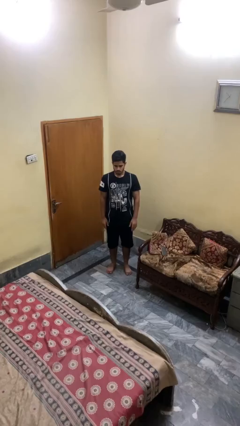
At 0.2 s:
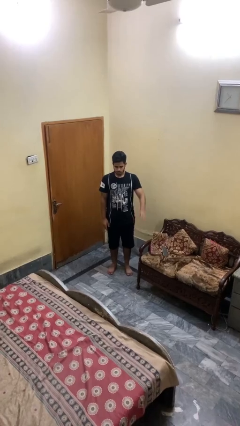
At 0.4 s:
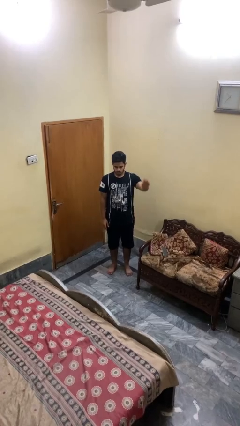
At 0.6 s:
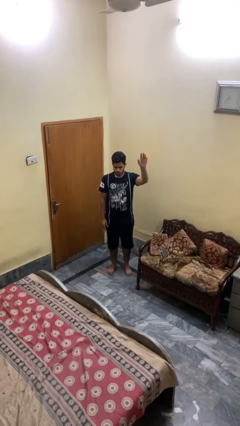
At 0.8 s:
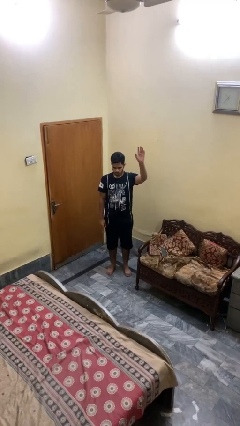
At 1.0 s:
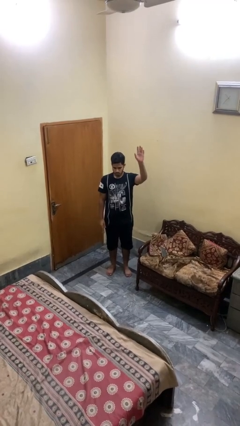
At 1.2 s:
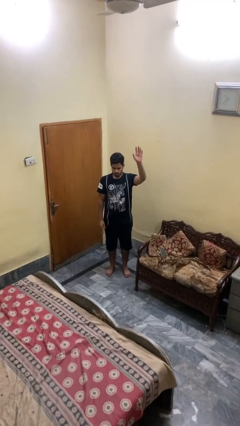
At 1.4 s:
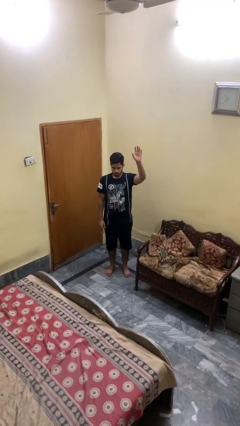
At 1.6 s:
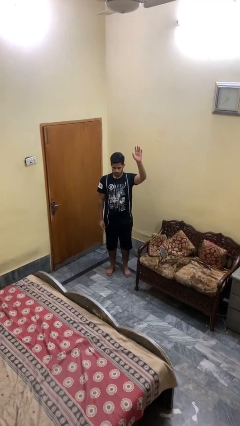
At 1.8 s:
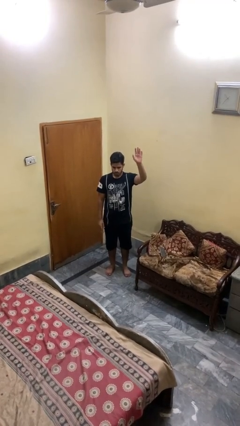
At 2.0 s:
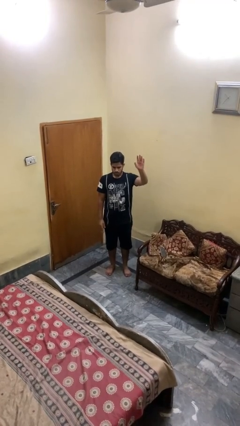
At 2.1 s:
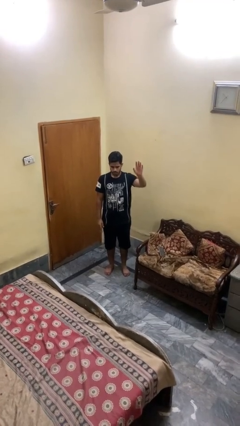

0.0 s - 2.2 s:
person gestures raise hand

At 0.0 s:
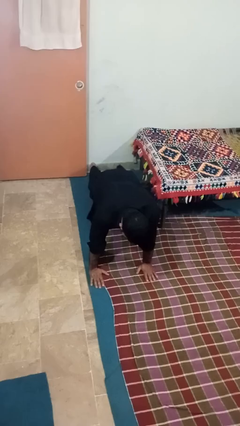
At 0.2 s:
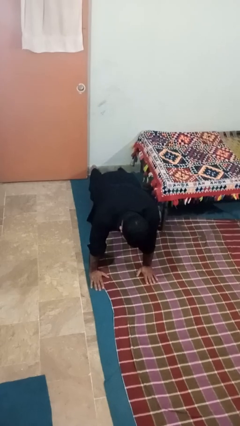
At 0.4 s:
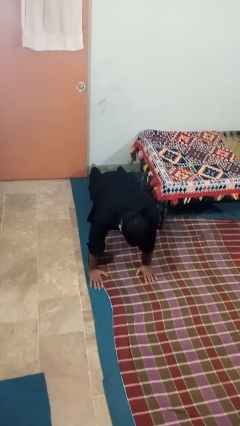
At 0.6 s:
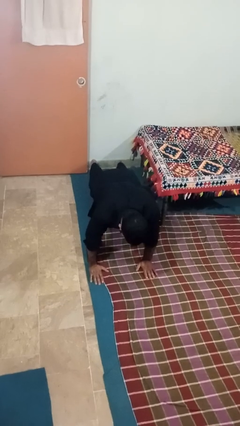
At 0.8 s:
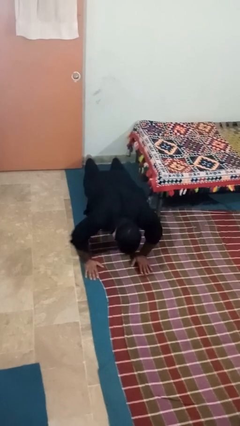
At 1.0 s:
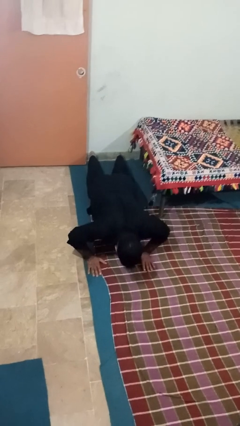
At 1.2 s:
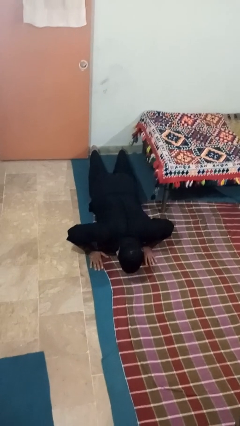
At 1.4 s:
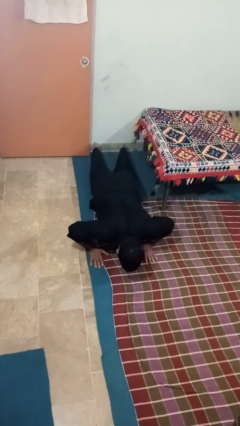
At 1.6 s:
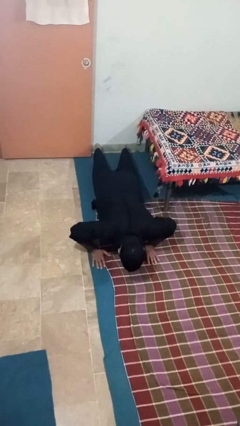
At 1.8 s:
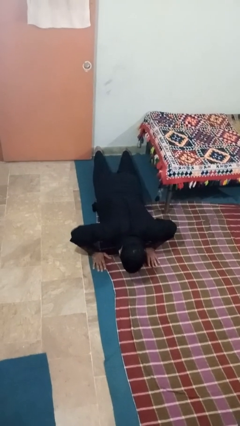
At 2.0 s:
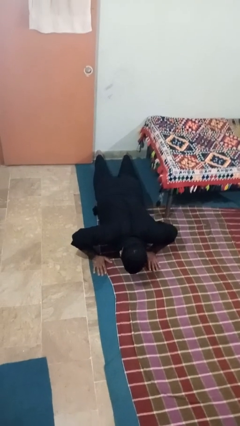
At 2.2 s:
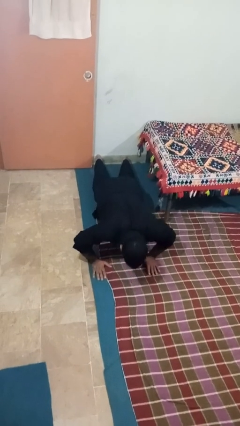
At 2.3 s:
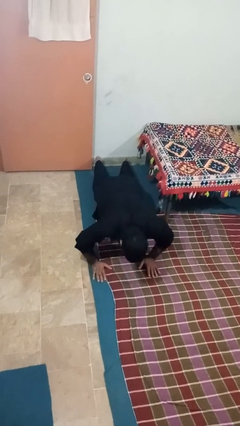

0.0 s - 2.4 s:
person exercises with pushup

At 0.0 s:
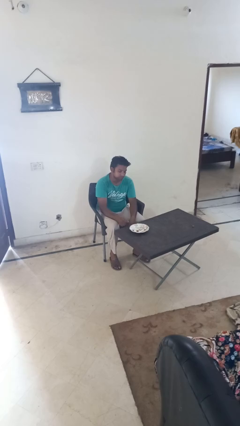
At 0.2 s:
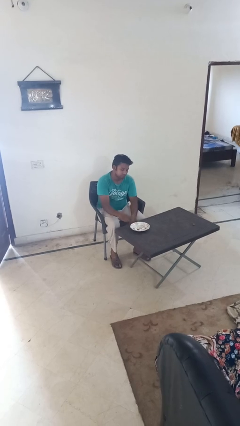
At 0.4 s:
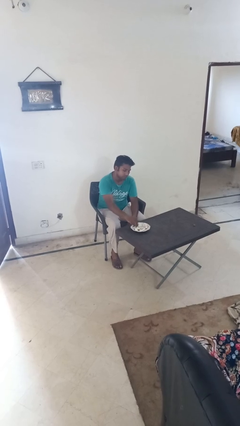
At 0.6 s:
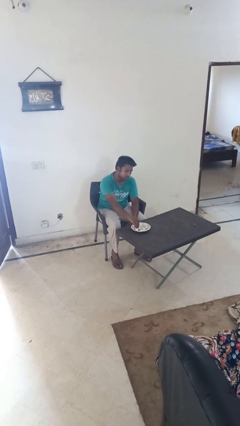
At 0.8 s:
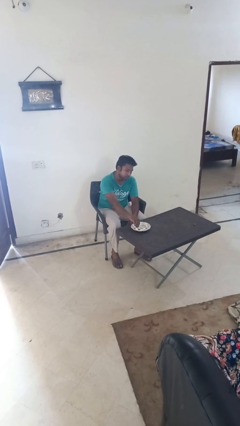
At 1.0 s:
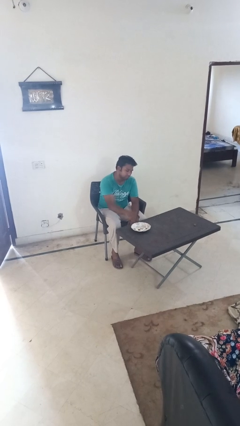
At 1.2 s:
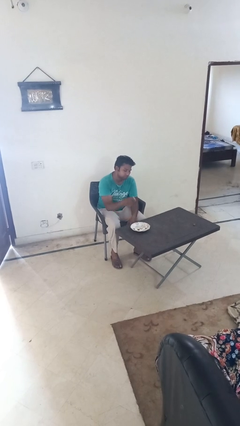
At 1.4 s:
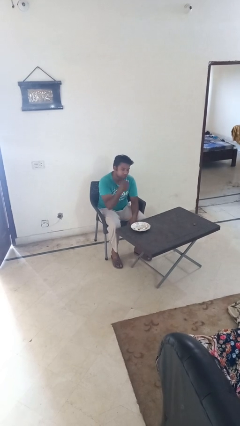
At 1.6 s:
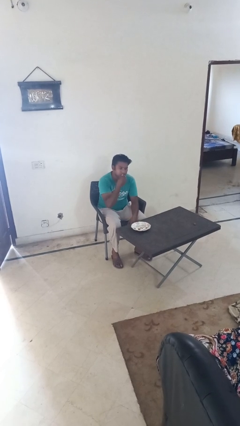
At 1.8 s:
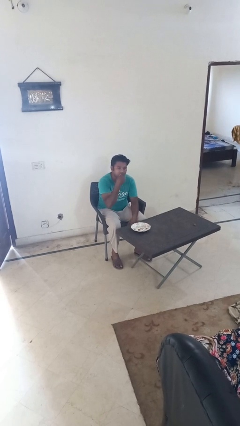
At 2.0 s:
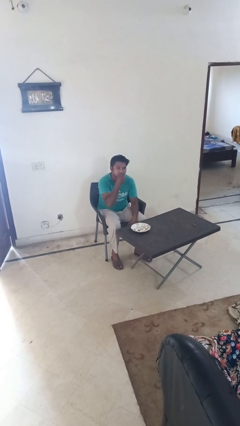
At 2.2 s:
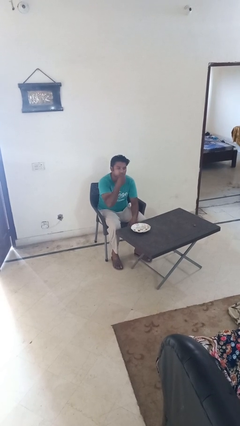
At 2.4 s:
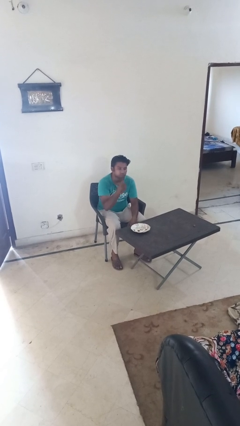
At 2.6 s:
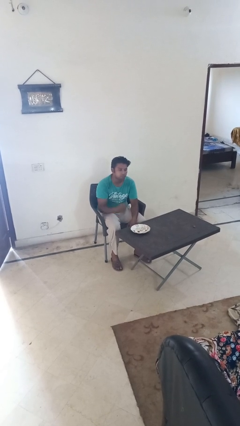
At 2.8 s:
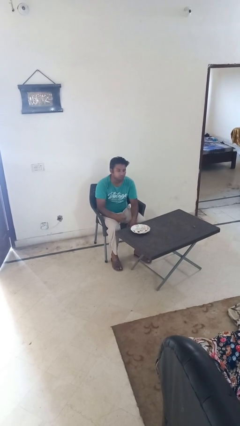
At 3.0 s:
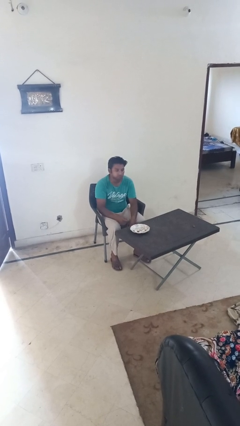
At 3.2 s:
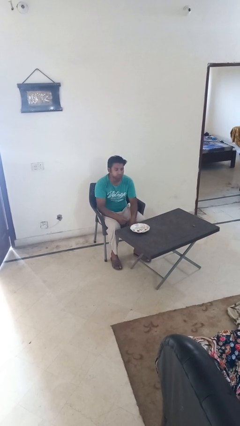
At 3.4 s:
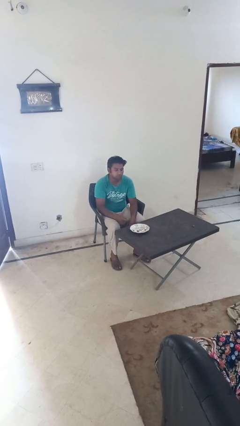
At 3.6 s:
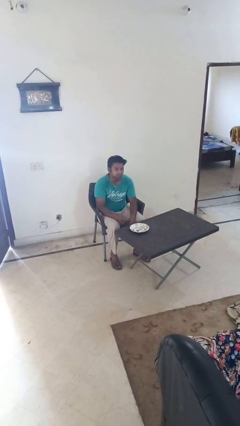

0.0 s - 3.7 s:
person eats with hands

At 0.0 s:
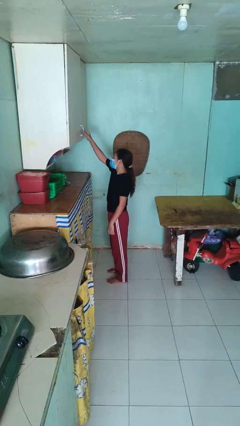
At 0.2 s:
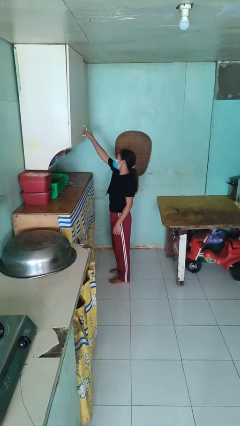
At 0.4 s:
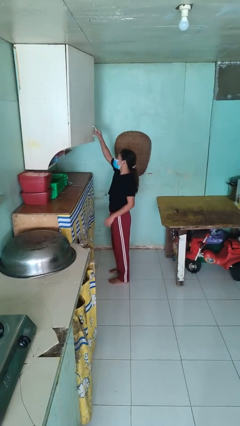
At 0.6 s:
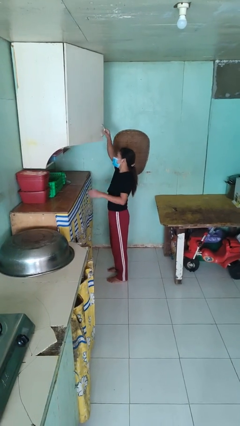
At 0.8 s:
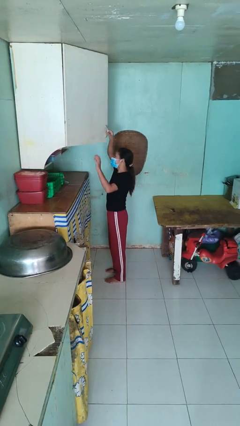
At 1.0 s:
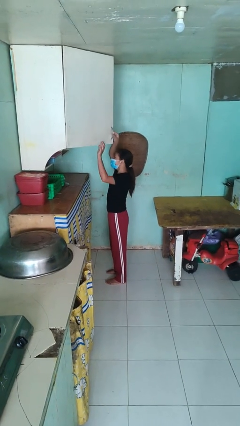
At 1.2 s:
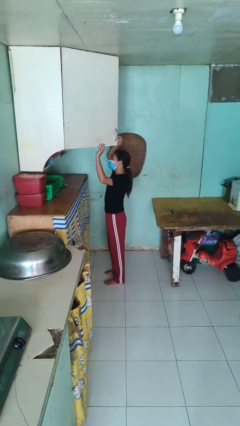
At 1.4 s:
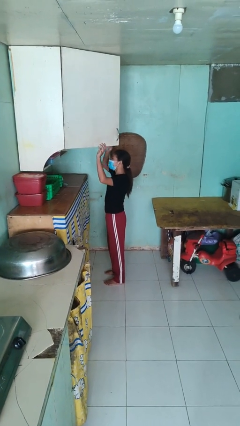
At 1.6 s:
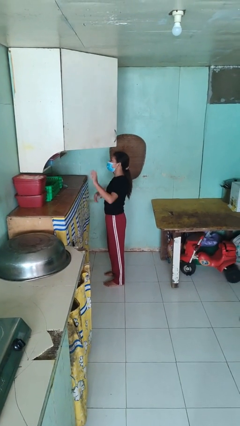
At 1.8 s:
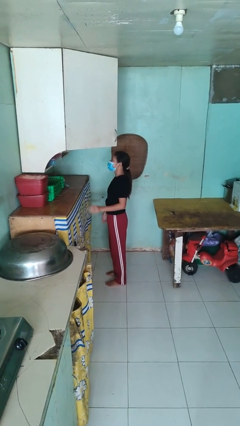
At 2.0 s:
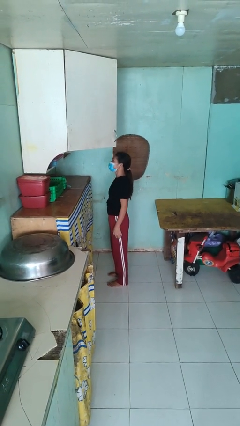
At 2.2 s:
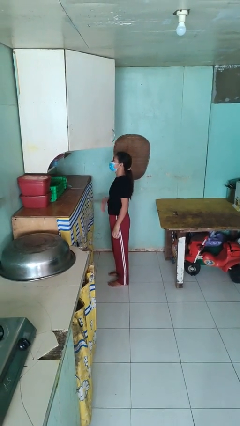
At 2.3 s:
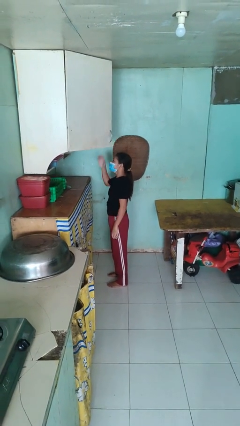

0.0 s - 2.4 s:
person opens cabinet

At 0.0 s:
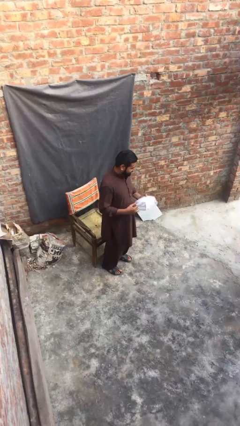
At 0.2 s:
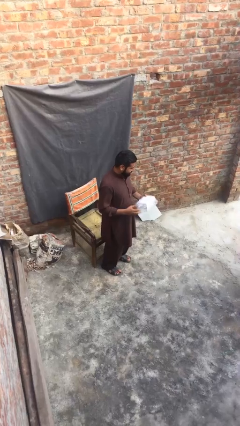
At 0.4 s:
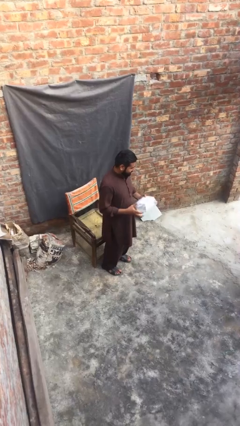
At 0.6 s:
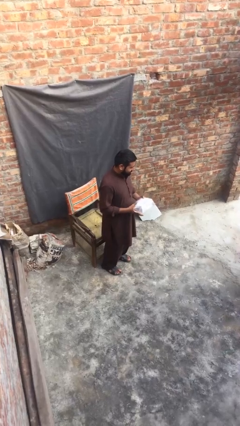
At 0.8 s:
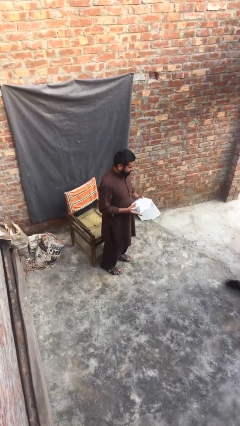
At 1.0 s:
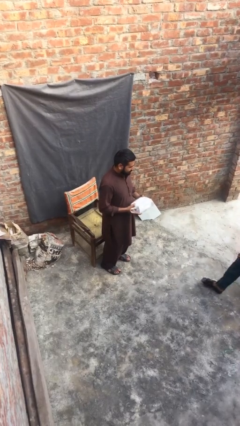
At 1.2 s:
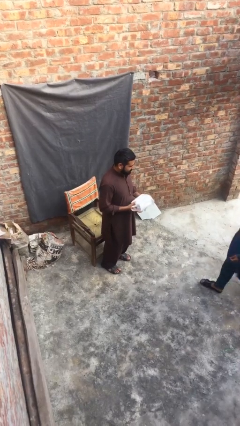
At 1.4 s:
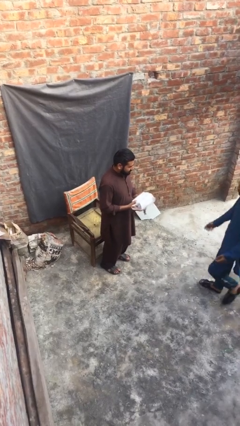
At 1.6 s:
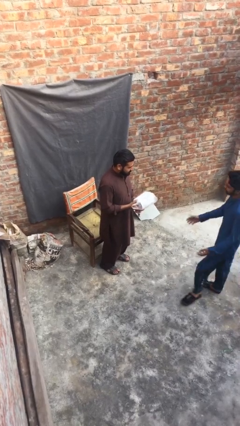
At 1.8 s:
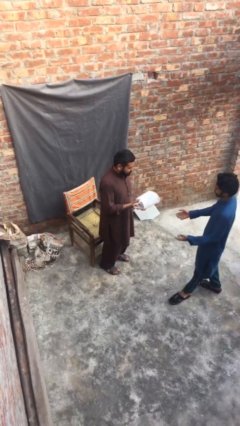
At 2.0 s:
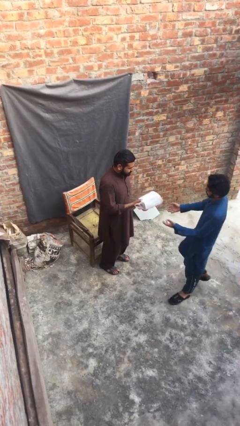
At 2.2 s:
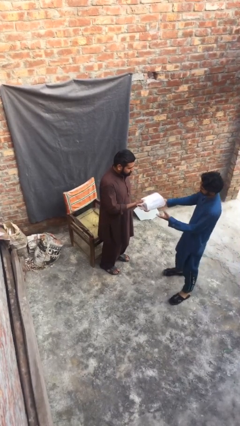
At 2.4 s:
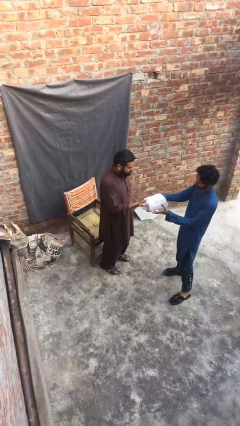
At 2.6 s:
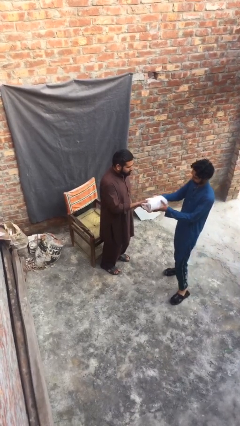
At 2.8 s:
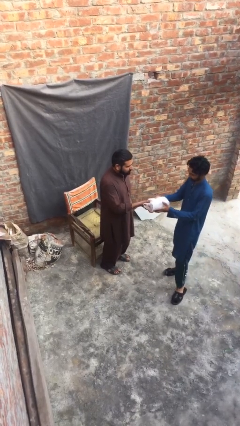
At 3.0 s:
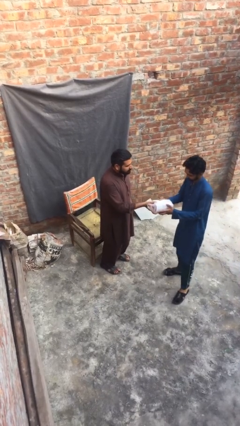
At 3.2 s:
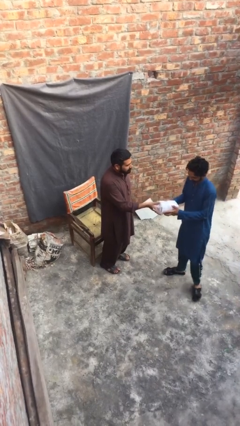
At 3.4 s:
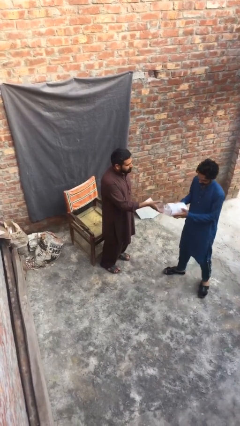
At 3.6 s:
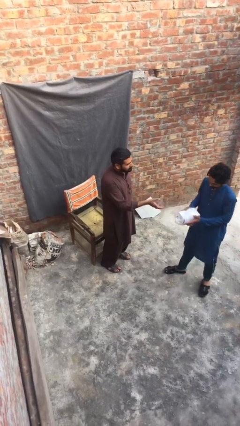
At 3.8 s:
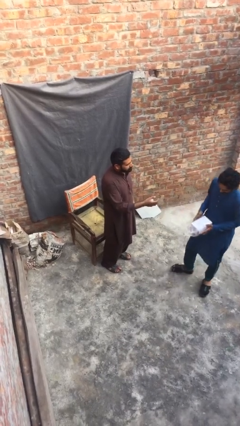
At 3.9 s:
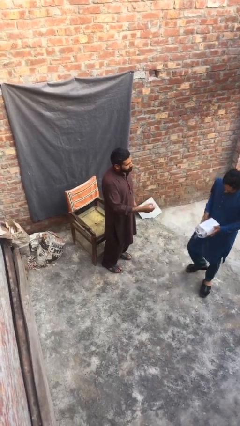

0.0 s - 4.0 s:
person transfers object to person

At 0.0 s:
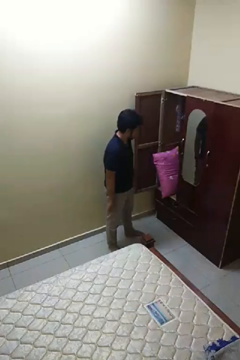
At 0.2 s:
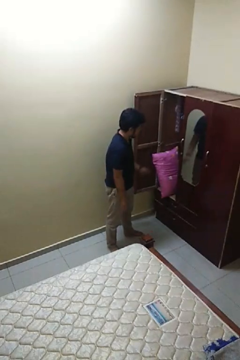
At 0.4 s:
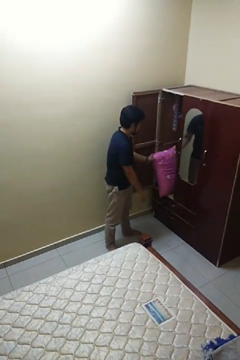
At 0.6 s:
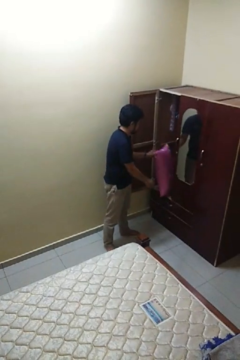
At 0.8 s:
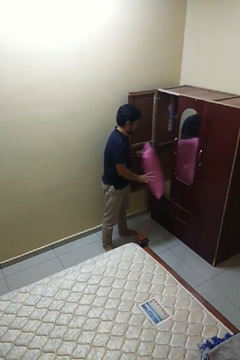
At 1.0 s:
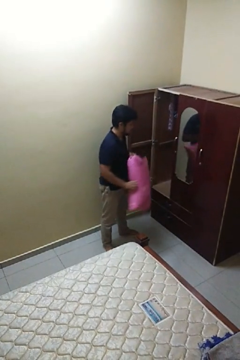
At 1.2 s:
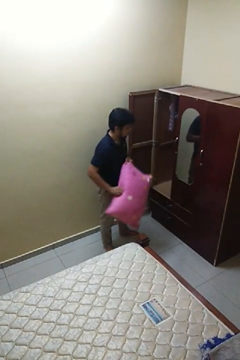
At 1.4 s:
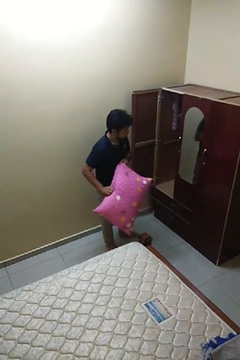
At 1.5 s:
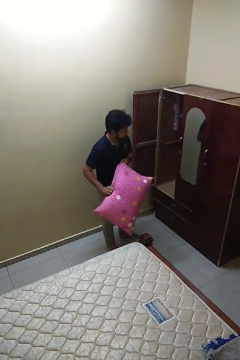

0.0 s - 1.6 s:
person picks up object from cabinet

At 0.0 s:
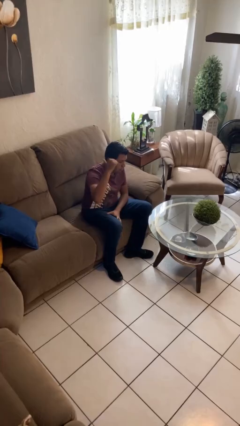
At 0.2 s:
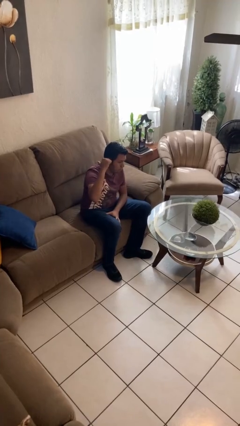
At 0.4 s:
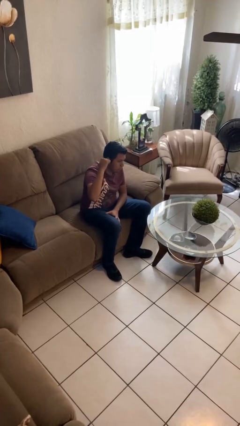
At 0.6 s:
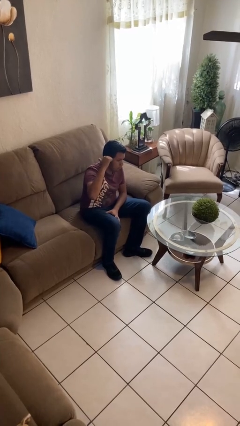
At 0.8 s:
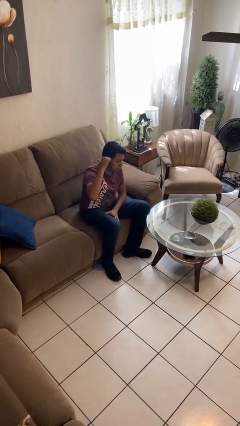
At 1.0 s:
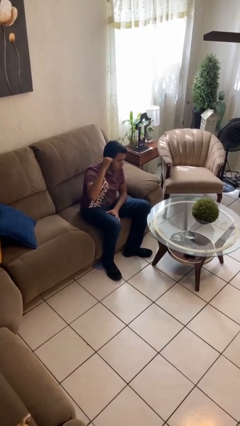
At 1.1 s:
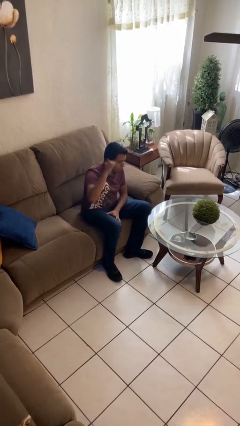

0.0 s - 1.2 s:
person gestures behind me
